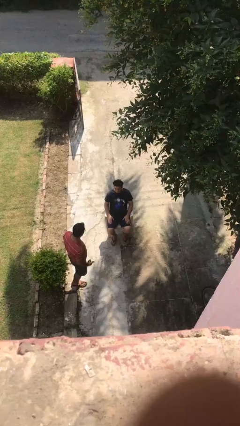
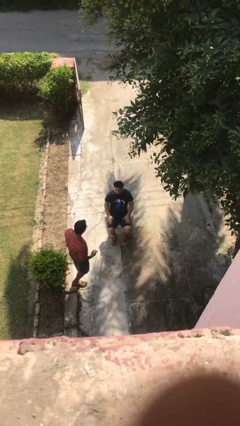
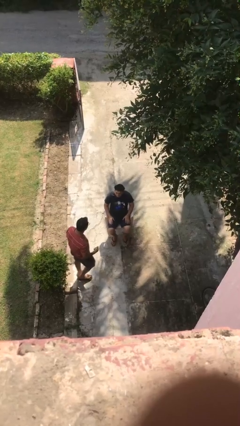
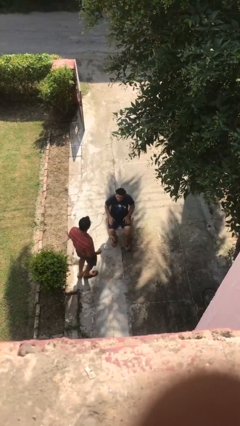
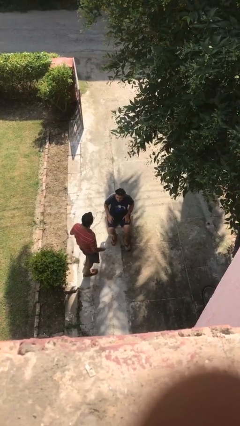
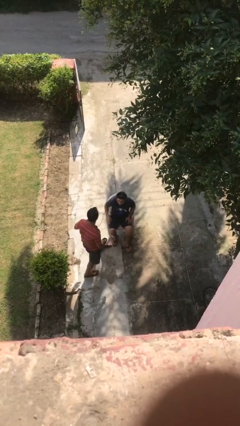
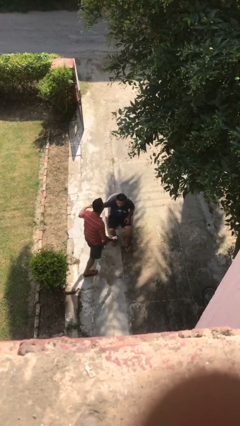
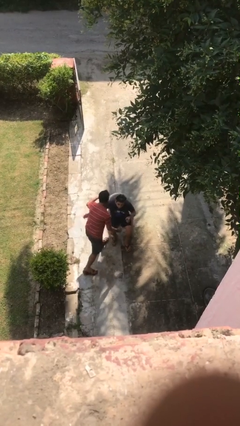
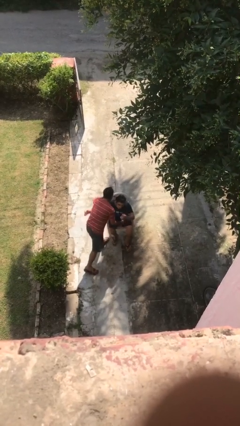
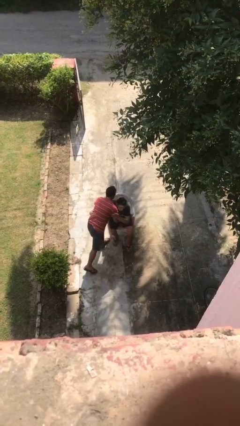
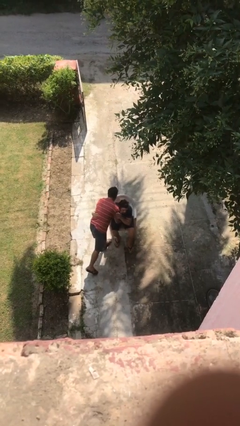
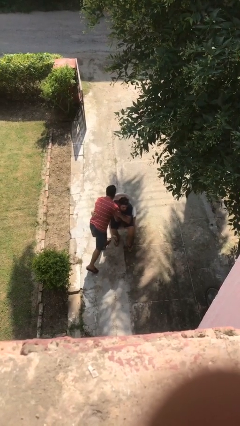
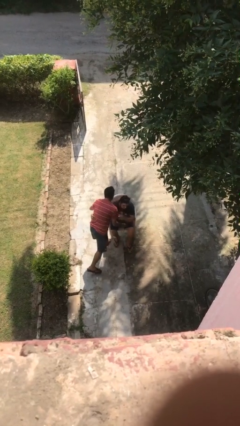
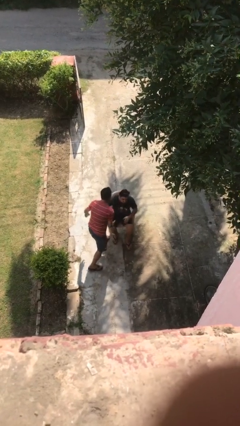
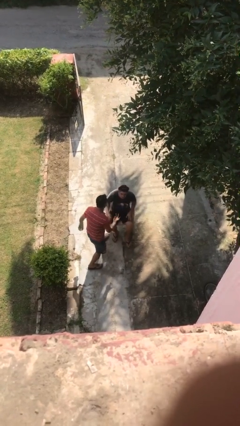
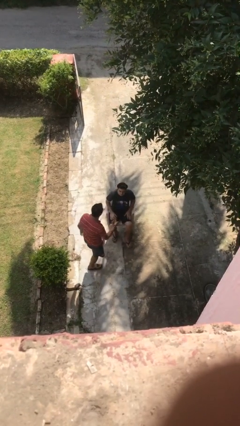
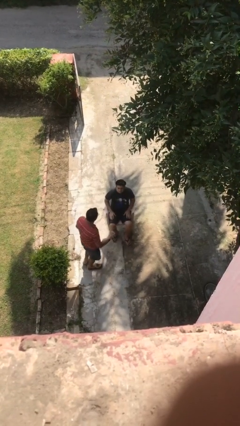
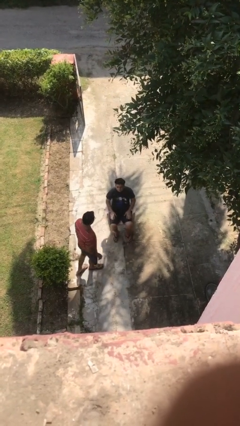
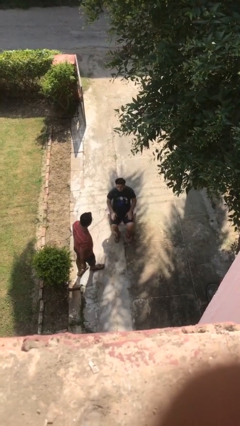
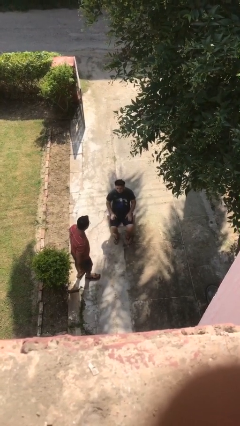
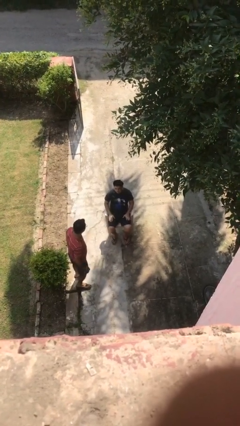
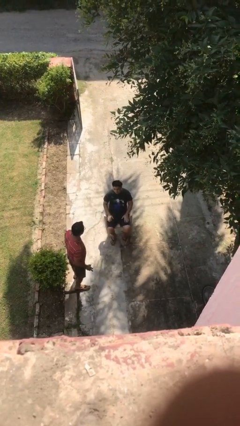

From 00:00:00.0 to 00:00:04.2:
person embraces person

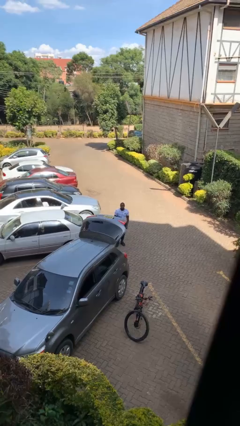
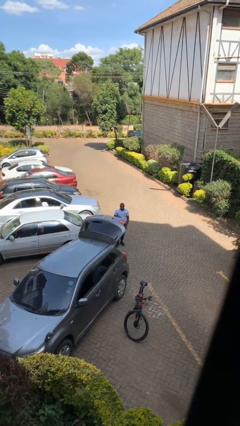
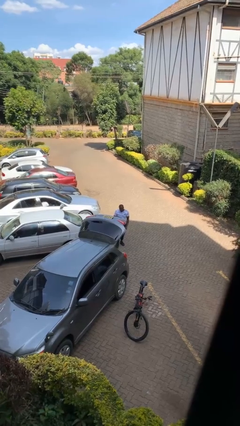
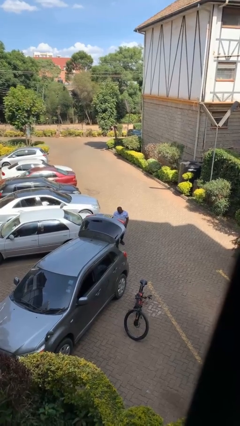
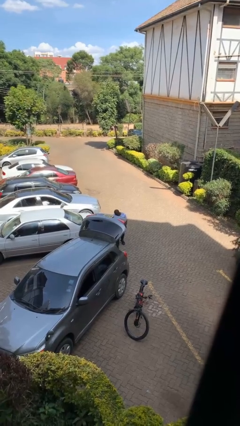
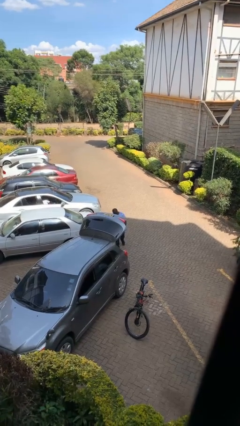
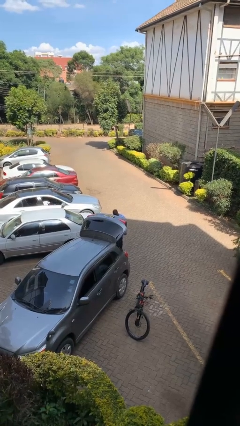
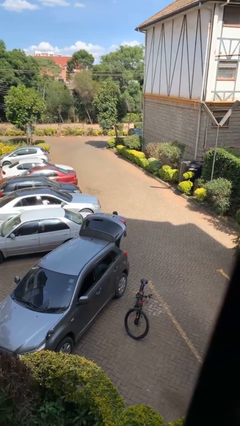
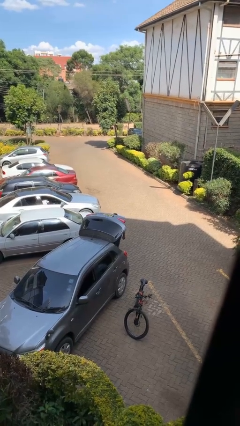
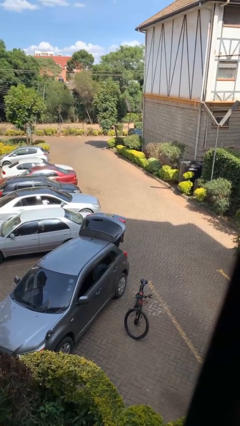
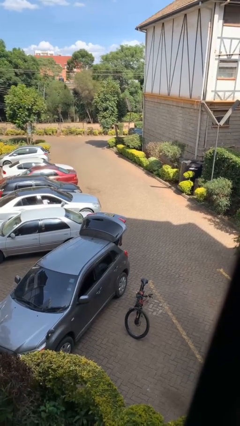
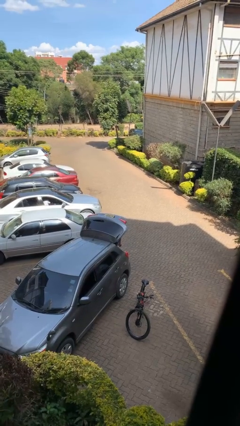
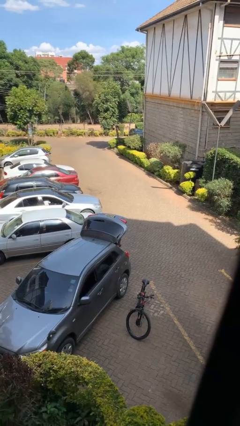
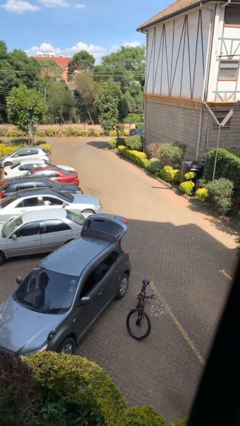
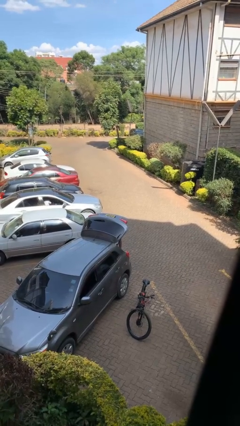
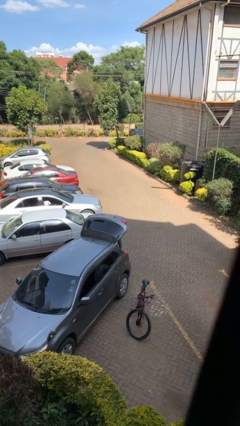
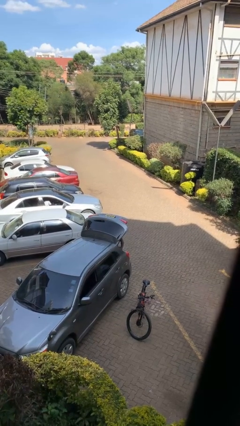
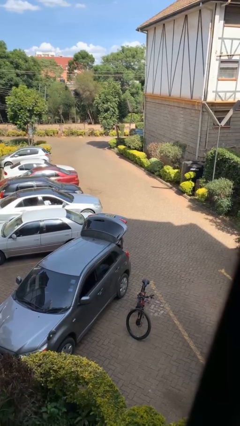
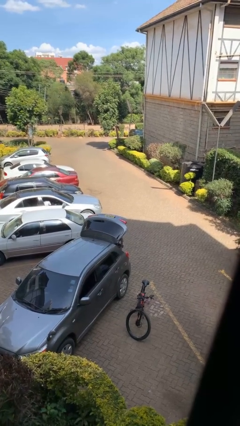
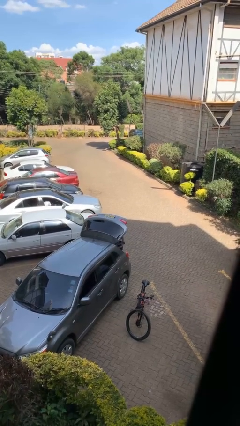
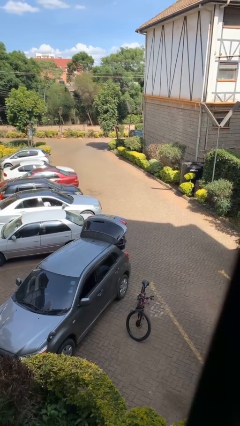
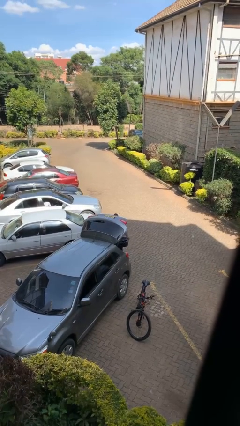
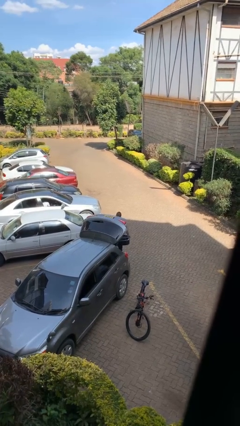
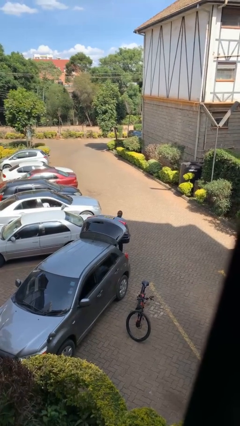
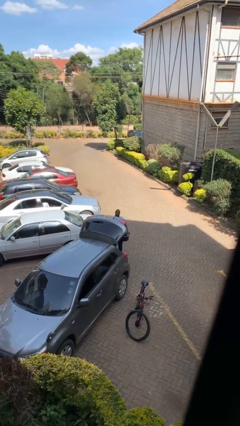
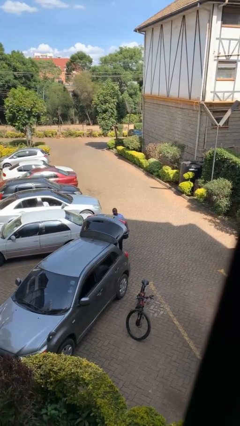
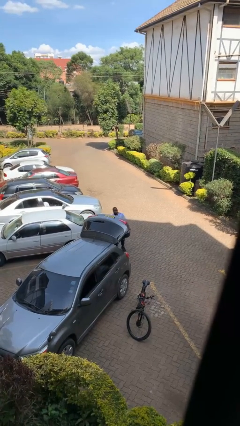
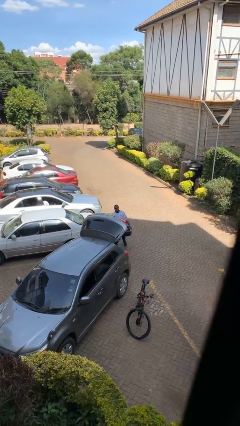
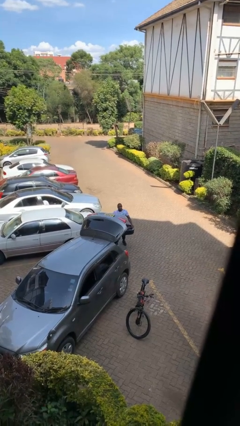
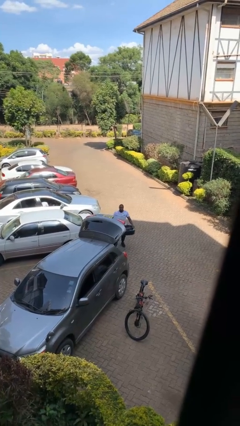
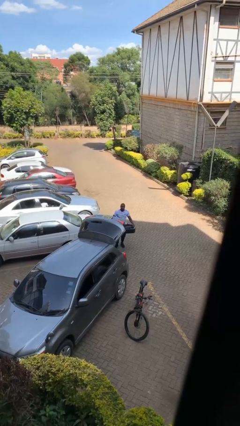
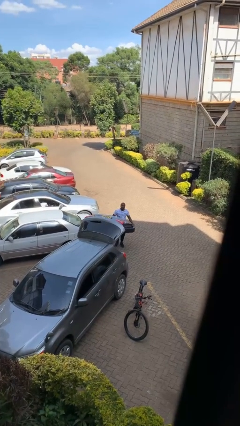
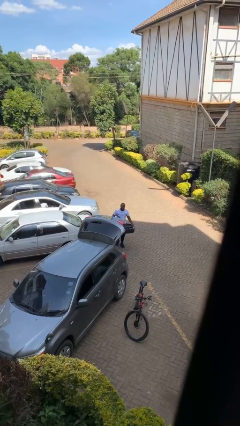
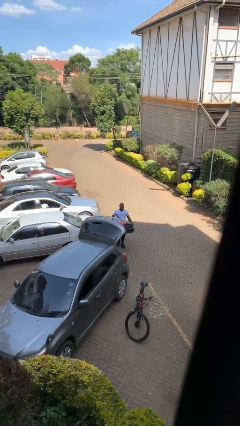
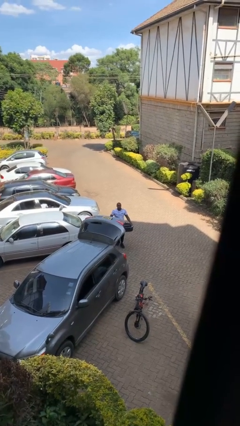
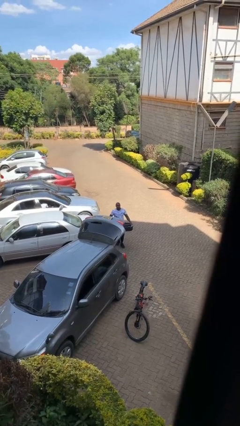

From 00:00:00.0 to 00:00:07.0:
person unloads car

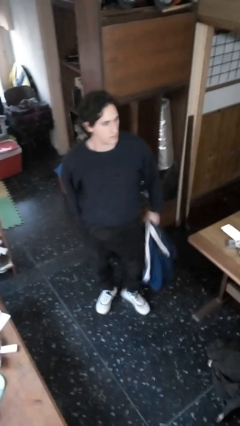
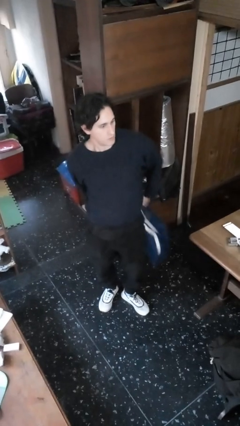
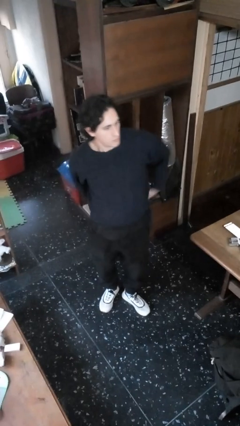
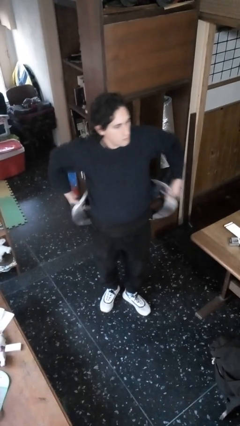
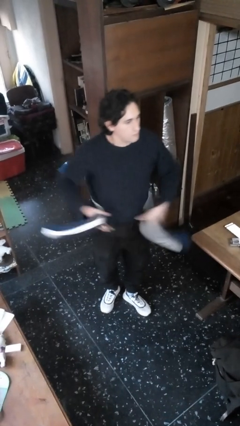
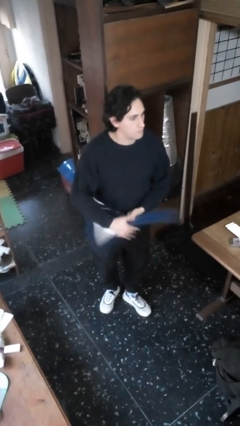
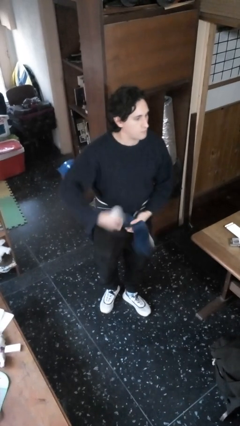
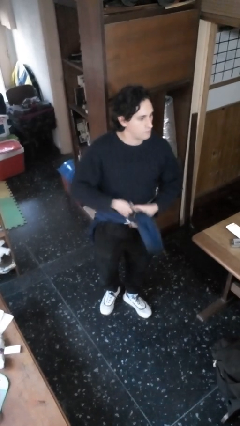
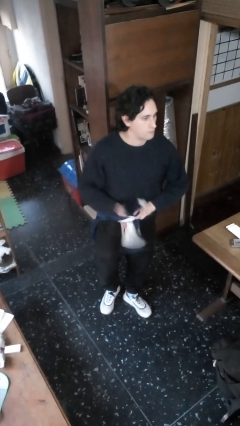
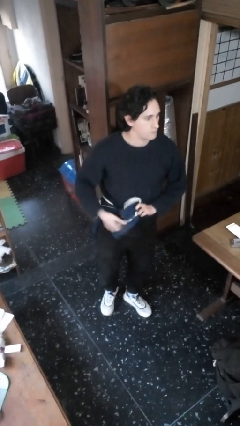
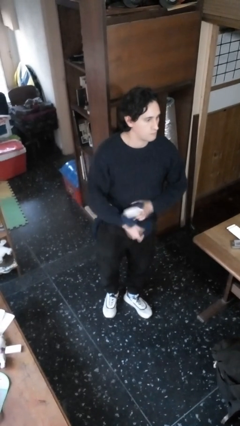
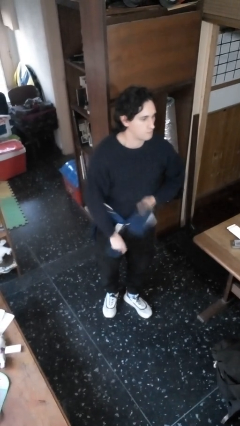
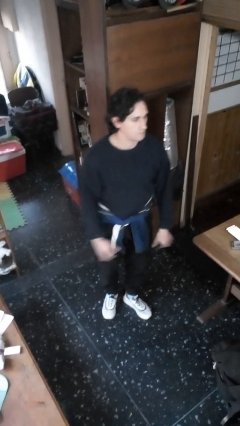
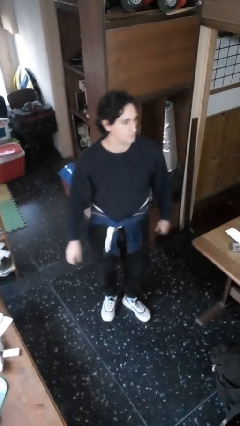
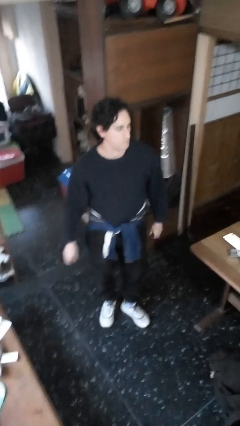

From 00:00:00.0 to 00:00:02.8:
person ties jacket around waist

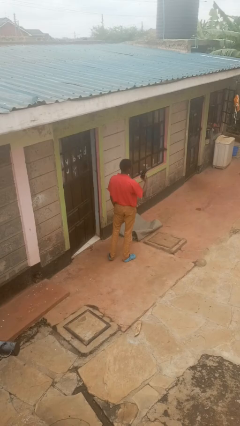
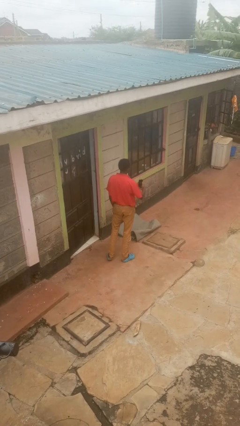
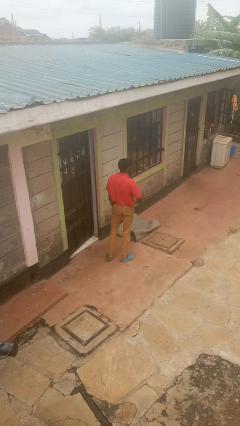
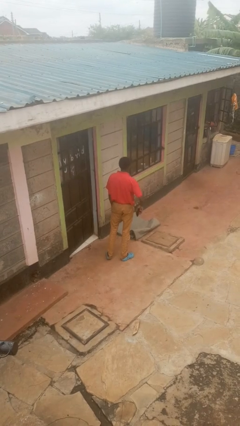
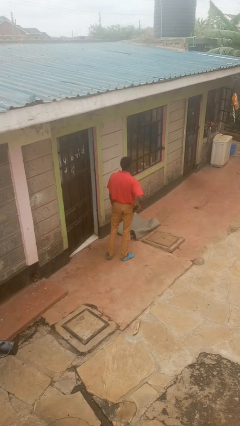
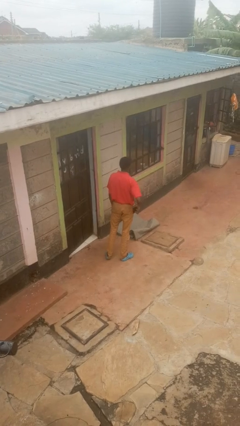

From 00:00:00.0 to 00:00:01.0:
person puts phone into pocket

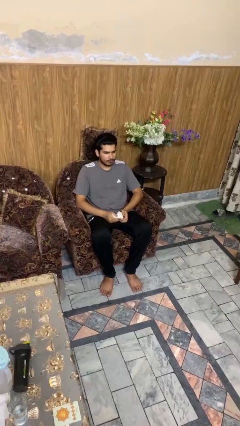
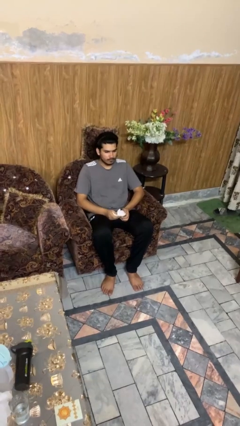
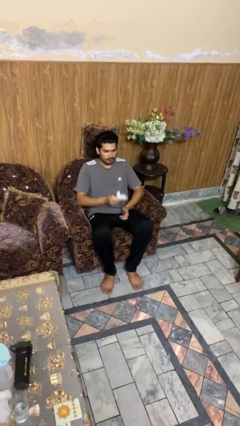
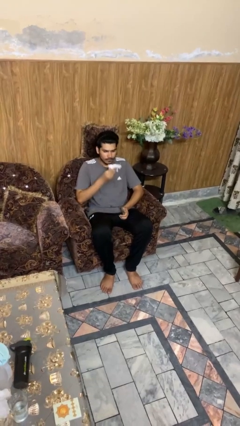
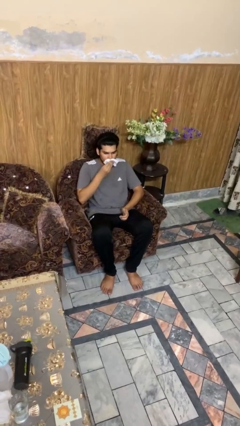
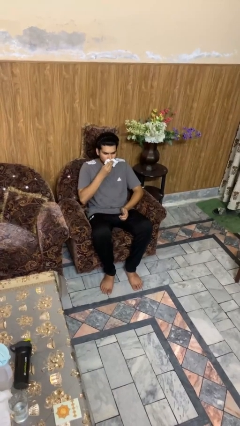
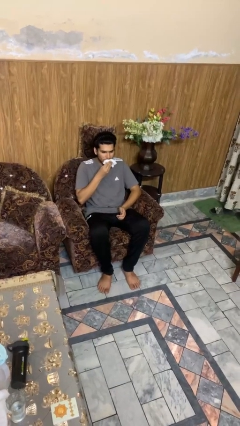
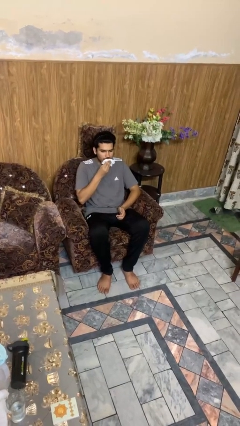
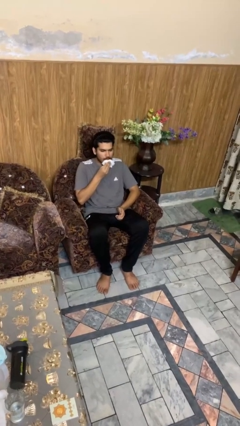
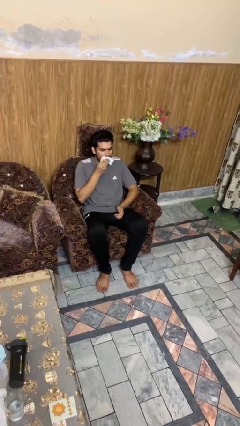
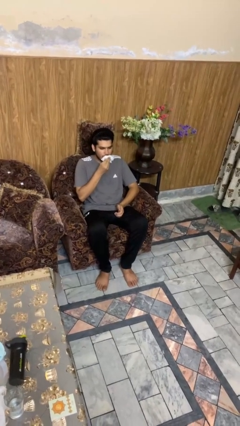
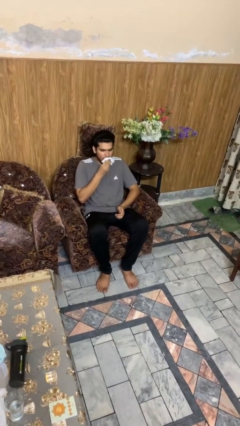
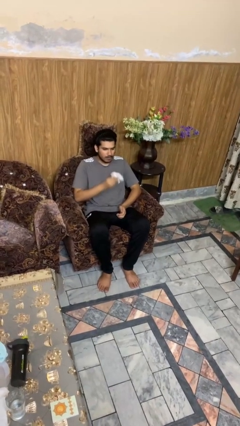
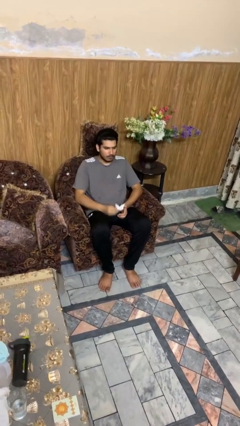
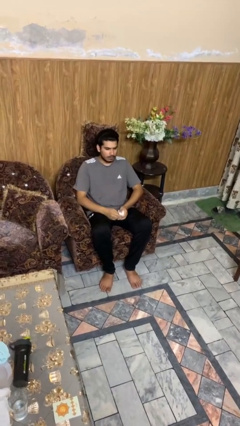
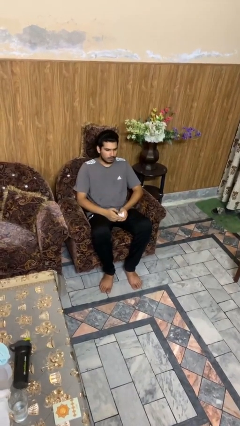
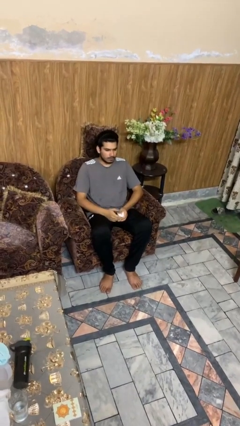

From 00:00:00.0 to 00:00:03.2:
person wipes mouth with napkin
